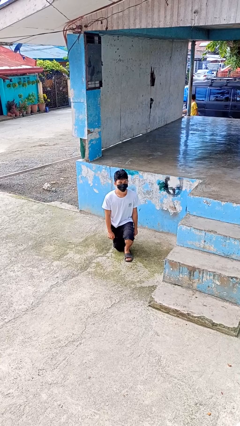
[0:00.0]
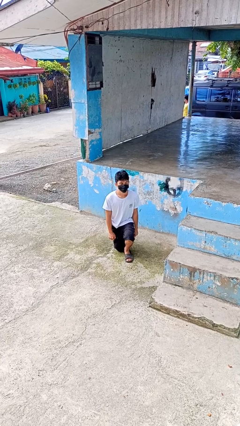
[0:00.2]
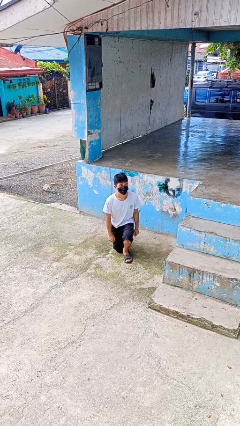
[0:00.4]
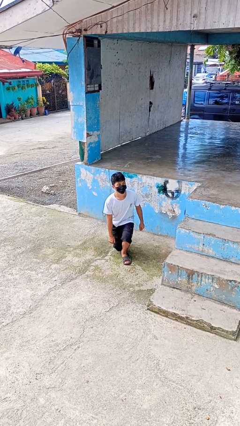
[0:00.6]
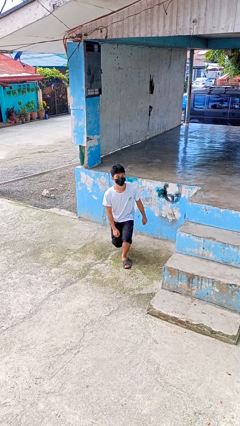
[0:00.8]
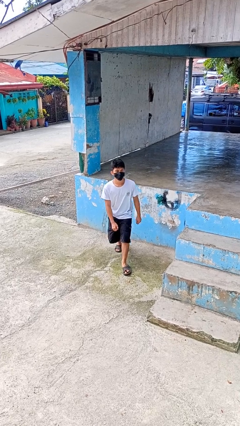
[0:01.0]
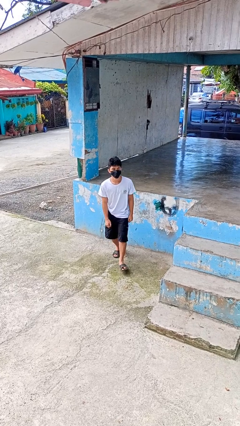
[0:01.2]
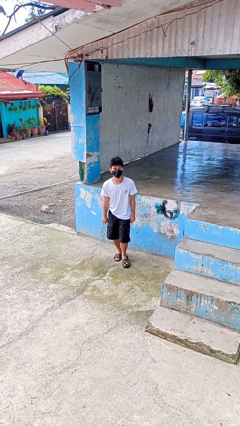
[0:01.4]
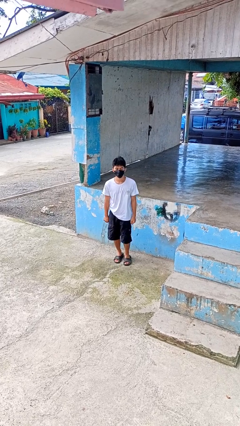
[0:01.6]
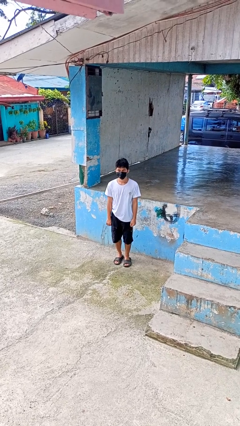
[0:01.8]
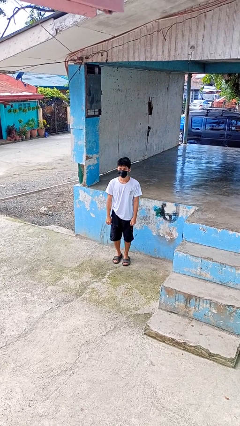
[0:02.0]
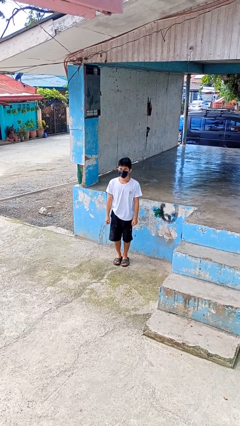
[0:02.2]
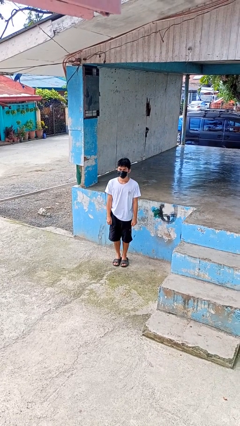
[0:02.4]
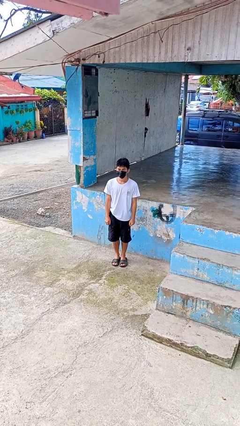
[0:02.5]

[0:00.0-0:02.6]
person stands up from floor

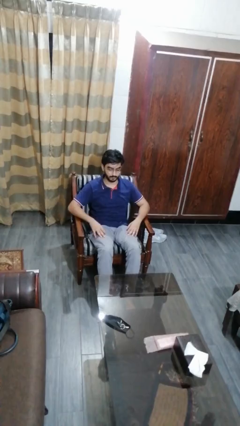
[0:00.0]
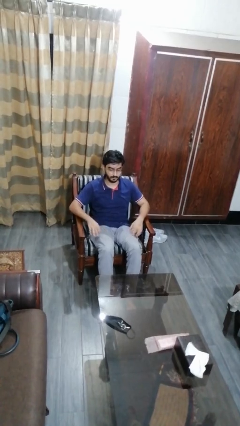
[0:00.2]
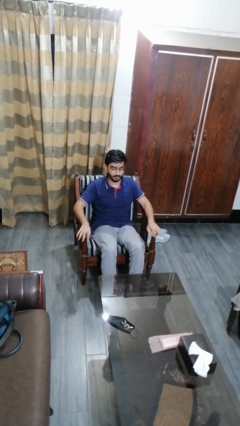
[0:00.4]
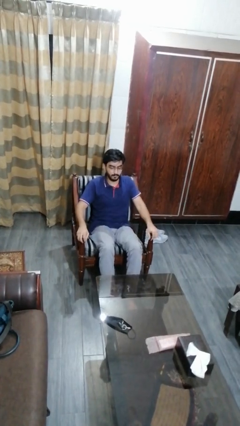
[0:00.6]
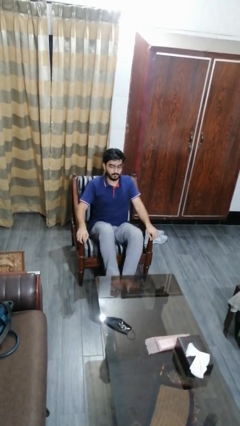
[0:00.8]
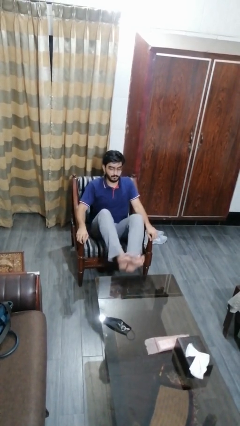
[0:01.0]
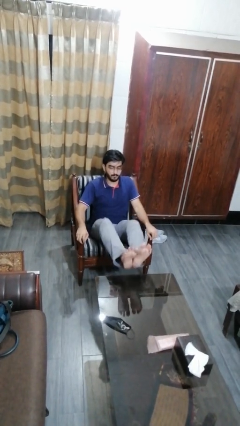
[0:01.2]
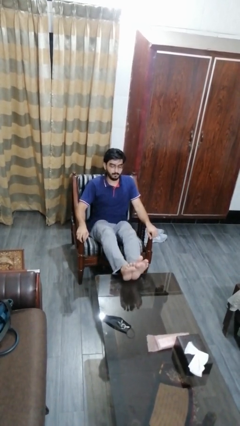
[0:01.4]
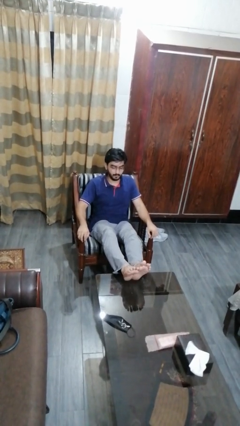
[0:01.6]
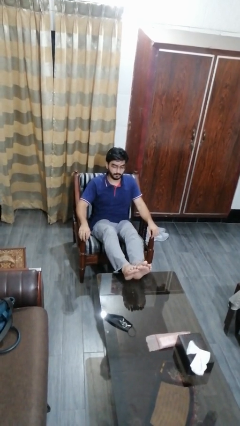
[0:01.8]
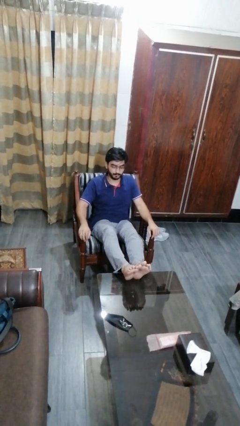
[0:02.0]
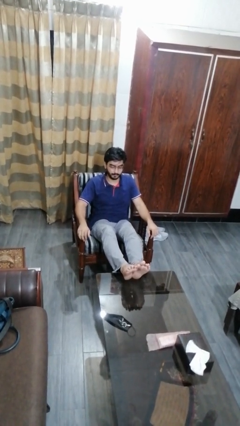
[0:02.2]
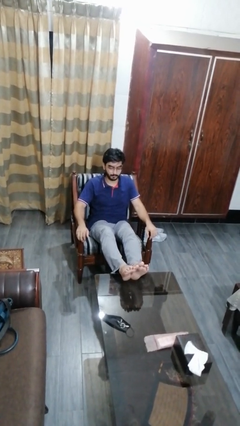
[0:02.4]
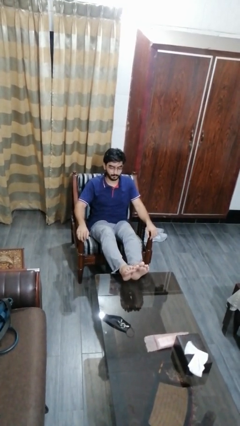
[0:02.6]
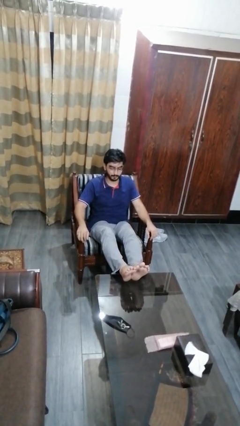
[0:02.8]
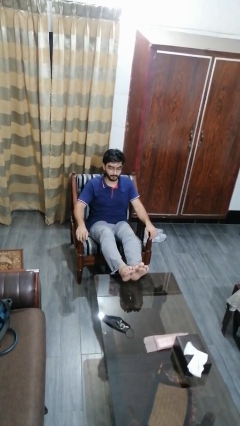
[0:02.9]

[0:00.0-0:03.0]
person puts feet up

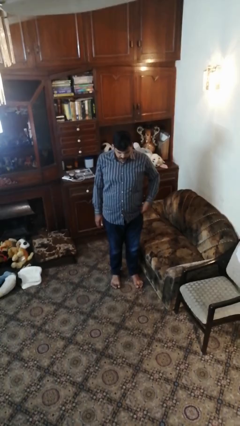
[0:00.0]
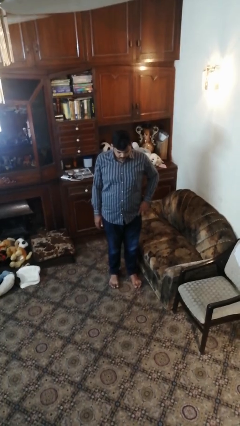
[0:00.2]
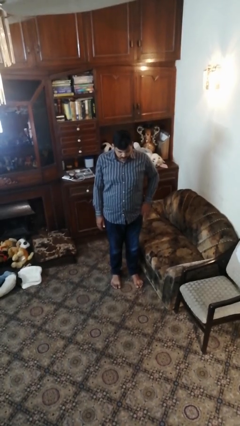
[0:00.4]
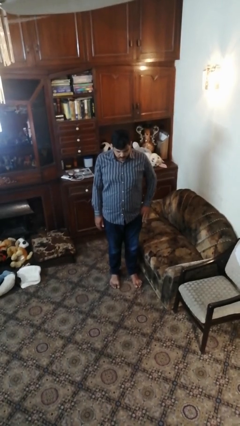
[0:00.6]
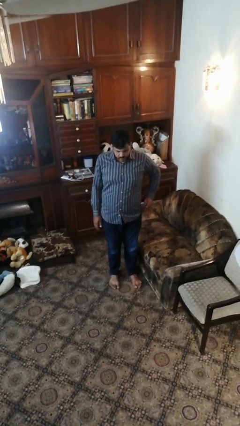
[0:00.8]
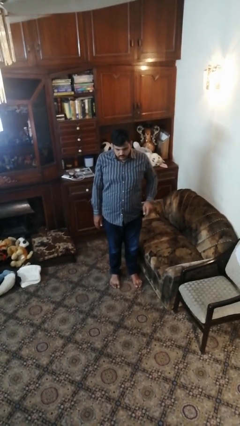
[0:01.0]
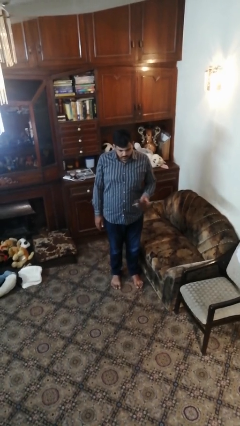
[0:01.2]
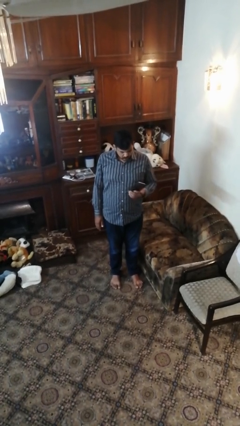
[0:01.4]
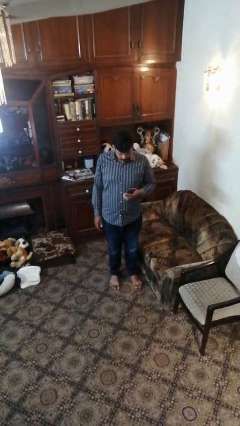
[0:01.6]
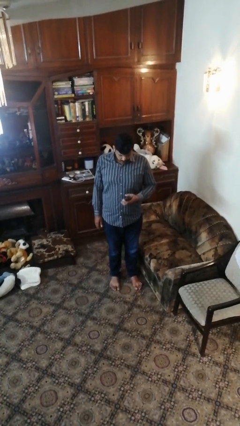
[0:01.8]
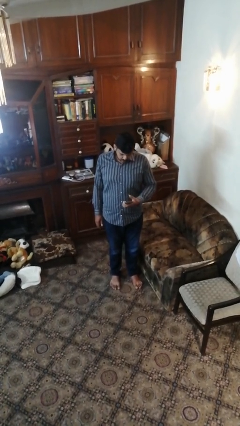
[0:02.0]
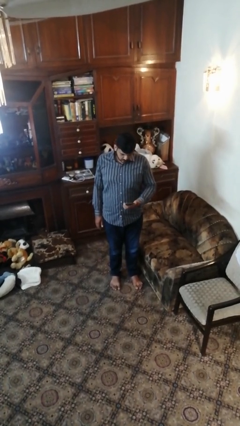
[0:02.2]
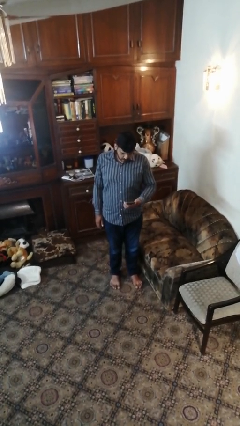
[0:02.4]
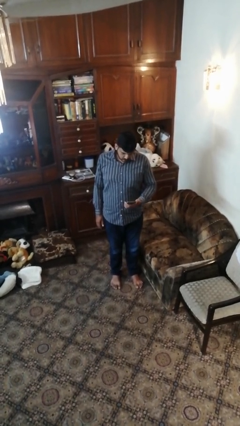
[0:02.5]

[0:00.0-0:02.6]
person takes phone from pocket

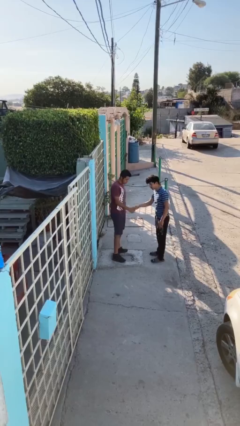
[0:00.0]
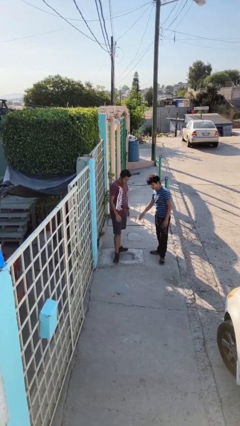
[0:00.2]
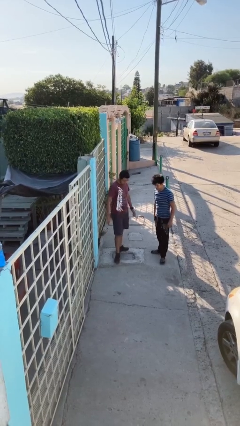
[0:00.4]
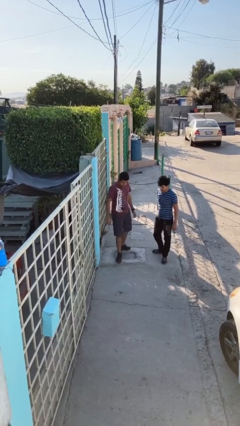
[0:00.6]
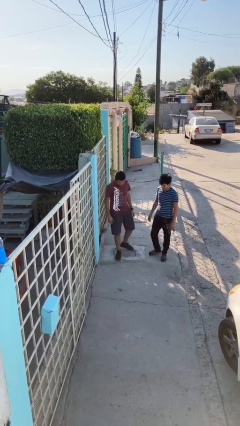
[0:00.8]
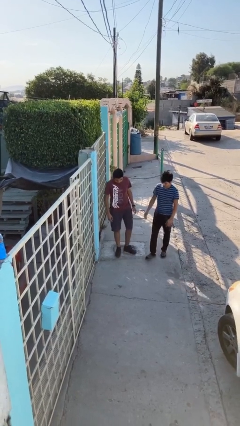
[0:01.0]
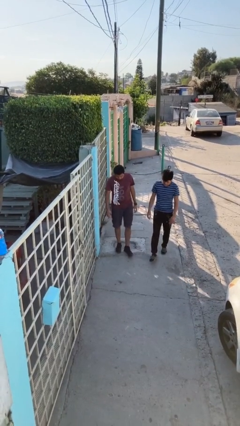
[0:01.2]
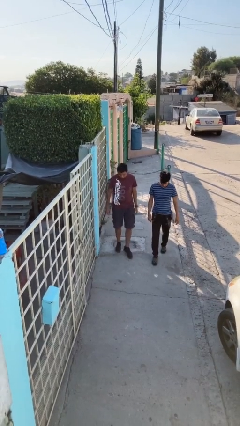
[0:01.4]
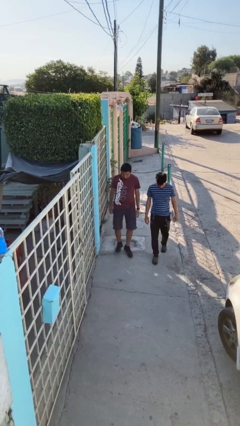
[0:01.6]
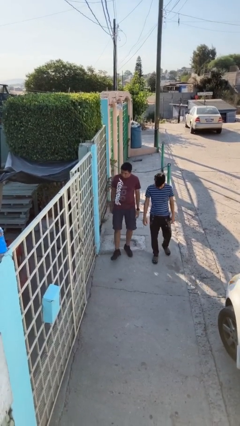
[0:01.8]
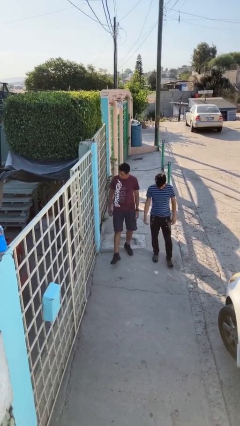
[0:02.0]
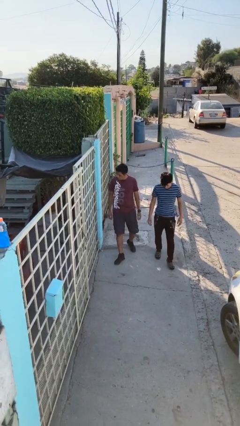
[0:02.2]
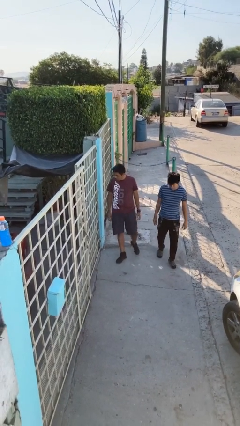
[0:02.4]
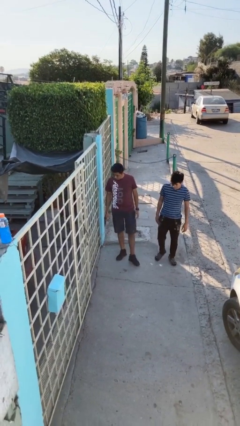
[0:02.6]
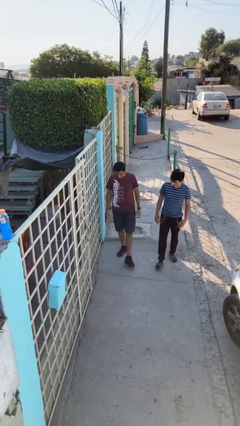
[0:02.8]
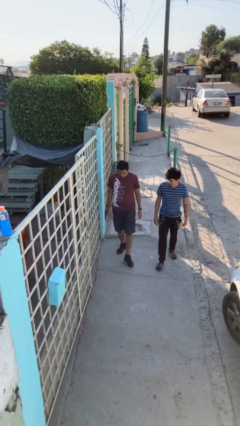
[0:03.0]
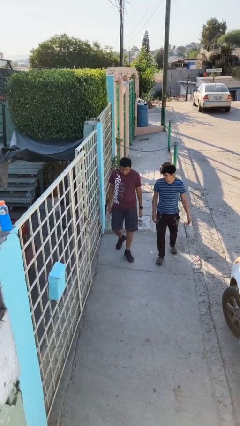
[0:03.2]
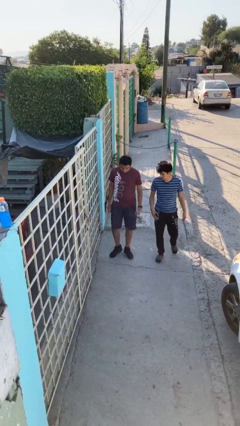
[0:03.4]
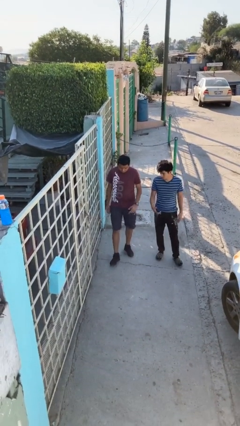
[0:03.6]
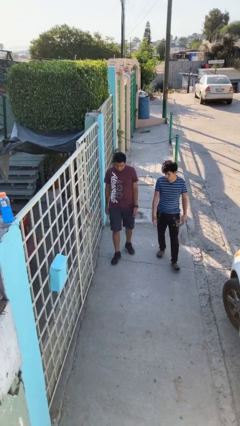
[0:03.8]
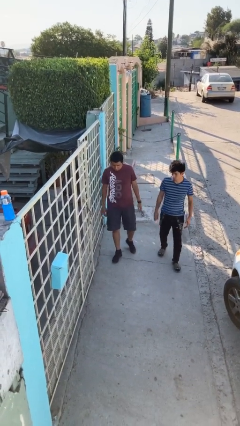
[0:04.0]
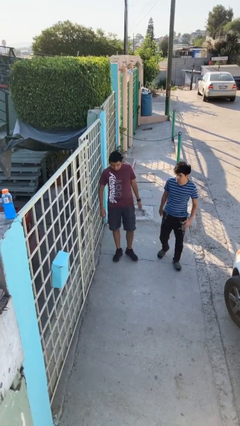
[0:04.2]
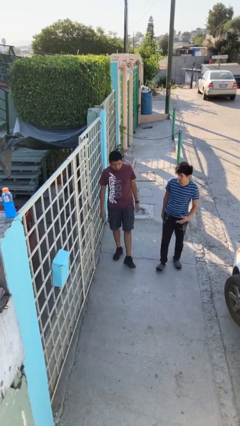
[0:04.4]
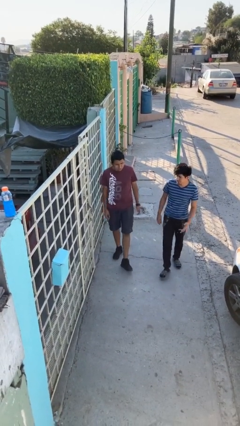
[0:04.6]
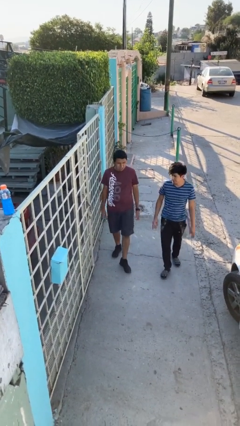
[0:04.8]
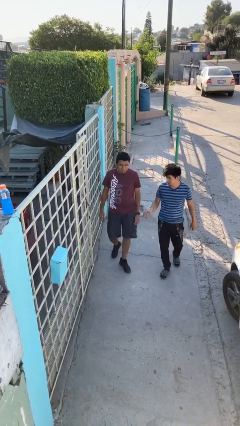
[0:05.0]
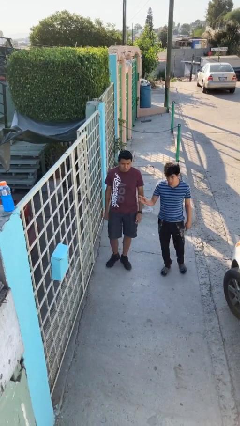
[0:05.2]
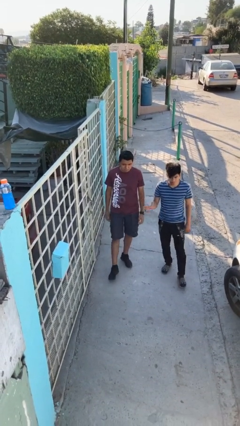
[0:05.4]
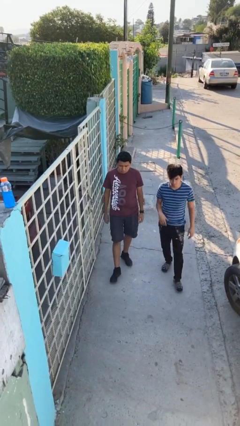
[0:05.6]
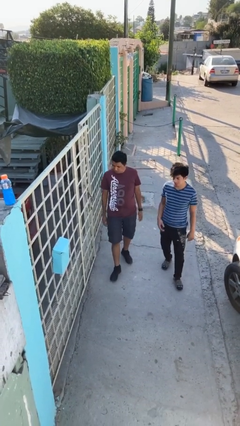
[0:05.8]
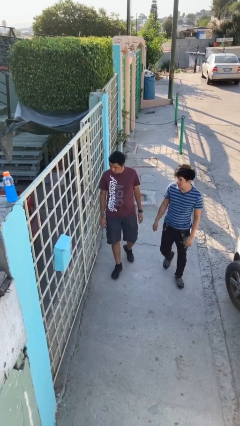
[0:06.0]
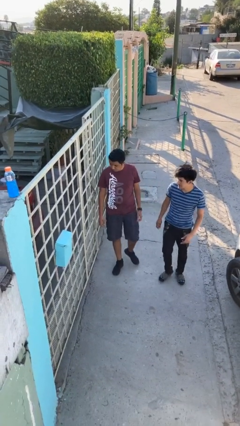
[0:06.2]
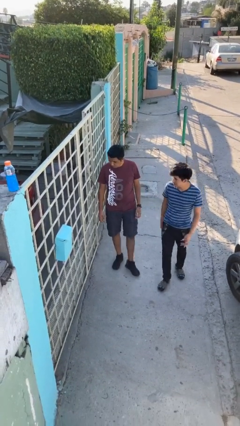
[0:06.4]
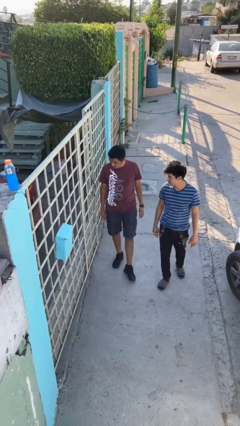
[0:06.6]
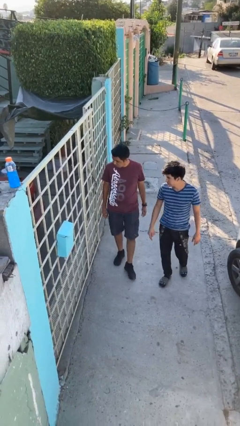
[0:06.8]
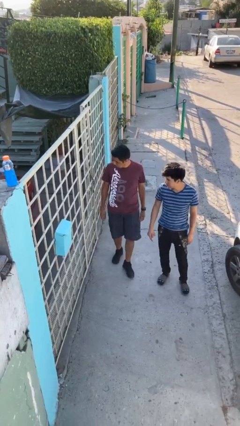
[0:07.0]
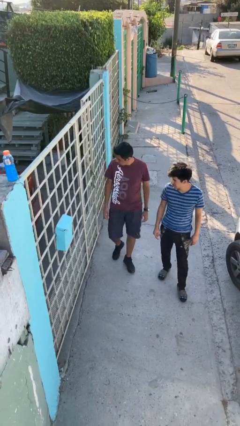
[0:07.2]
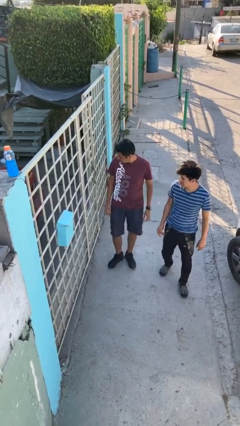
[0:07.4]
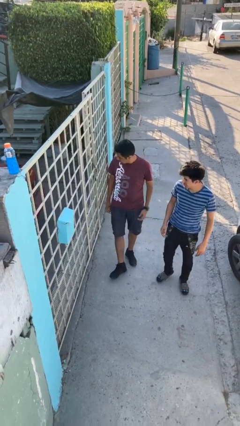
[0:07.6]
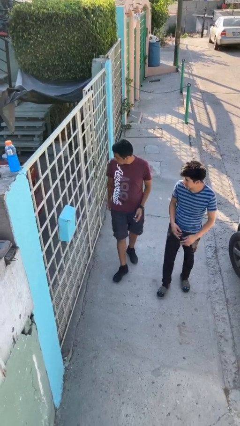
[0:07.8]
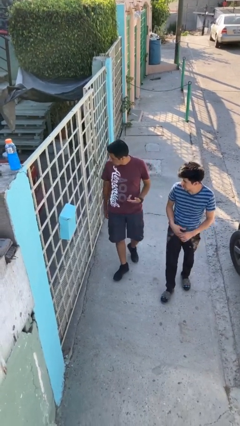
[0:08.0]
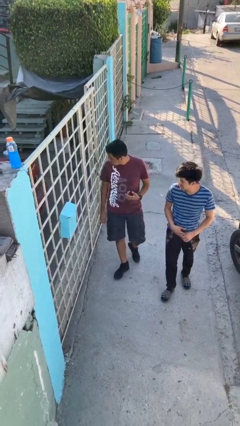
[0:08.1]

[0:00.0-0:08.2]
person talks to person

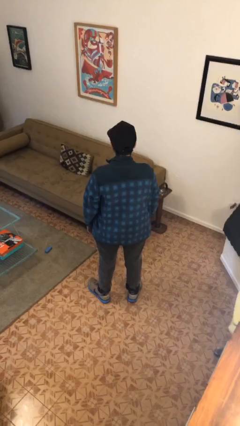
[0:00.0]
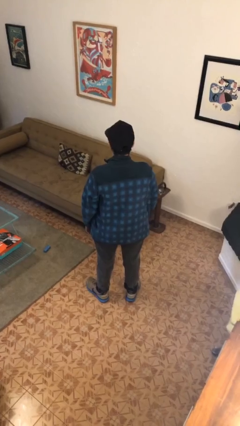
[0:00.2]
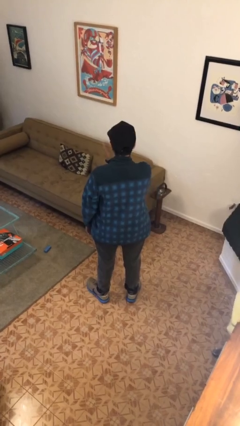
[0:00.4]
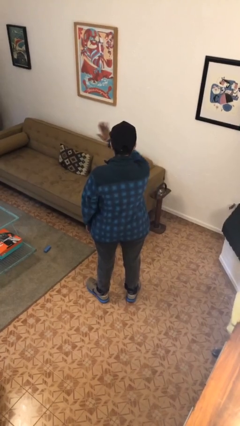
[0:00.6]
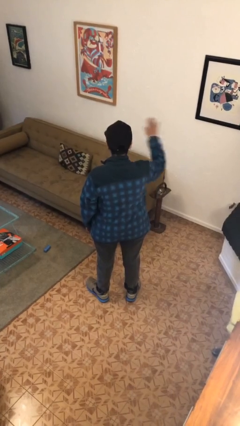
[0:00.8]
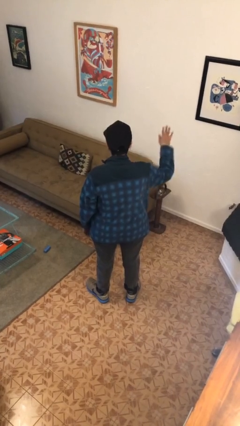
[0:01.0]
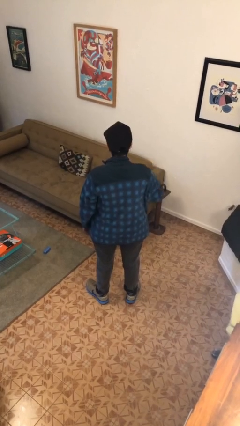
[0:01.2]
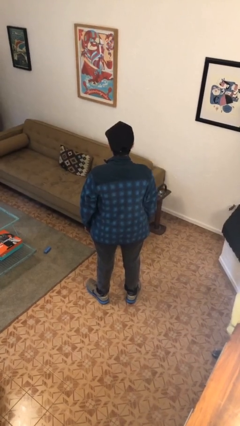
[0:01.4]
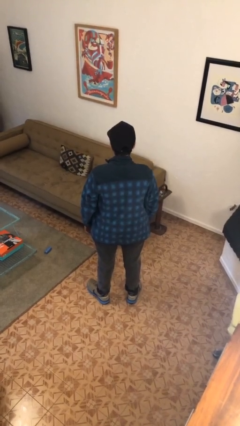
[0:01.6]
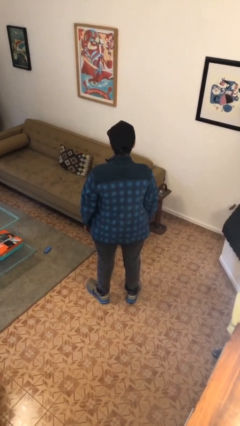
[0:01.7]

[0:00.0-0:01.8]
person gestures swipe right
